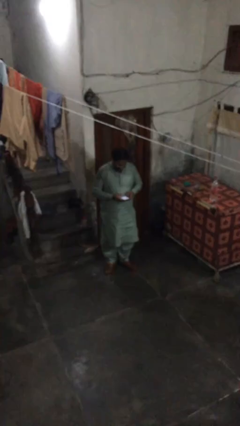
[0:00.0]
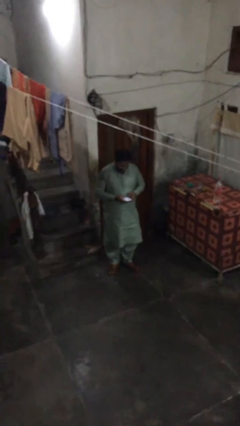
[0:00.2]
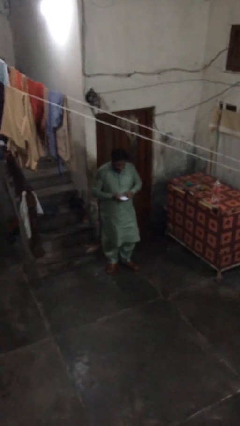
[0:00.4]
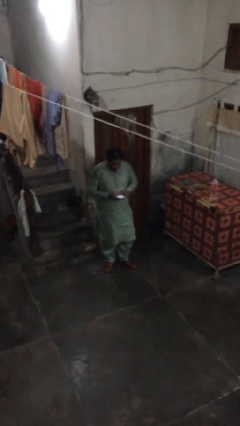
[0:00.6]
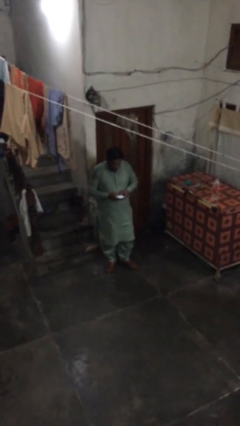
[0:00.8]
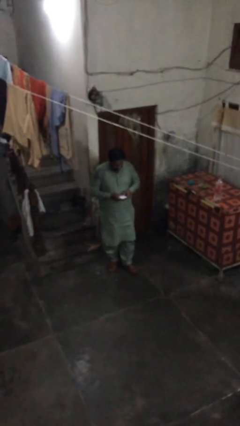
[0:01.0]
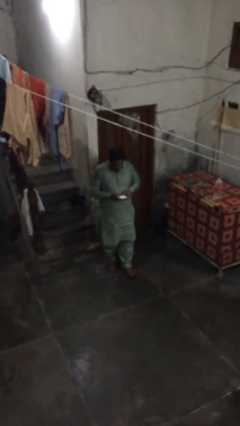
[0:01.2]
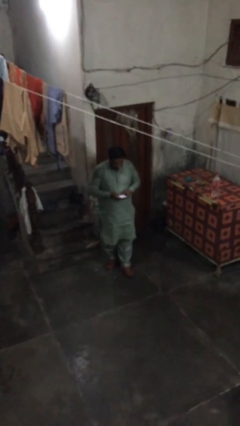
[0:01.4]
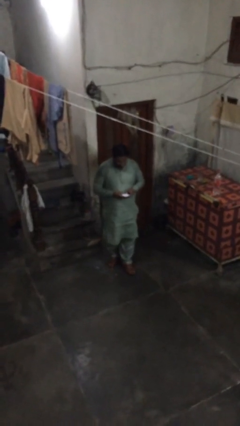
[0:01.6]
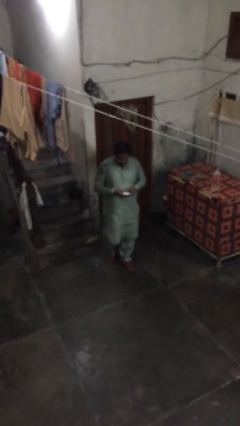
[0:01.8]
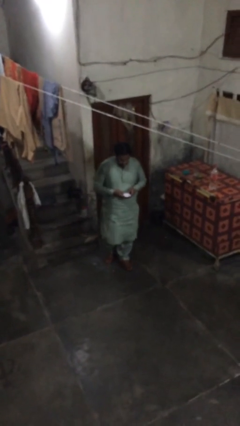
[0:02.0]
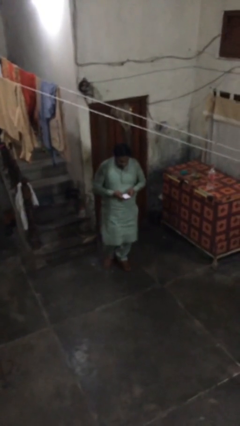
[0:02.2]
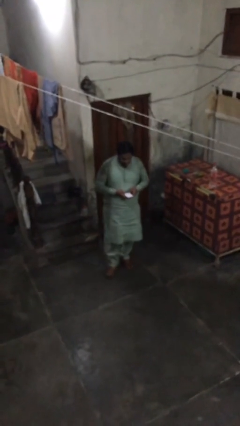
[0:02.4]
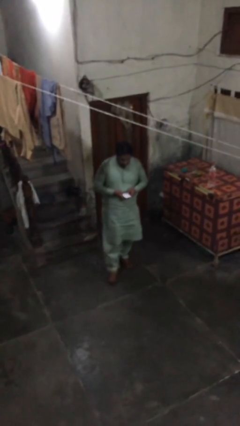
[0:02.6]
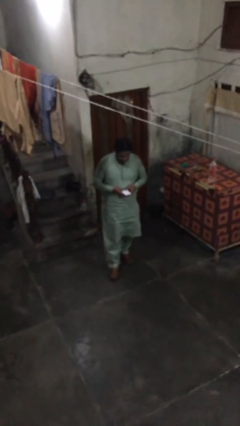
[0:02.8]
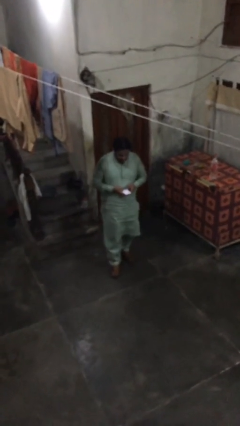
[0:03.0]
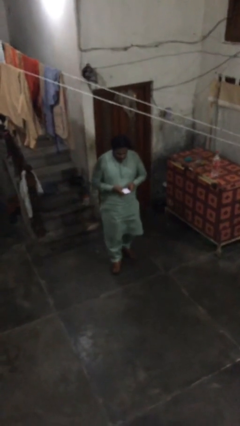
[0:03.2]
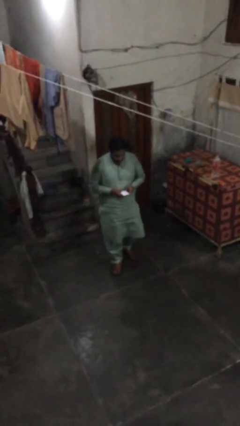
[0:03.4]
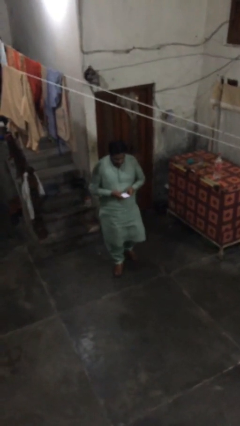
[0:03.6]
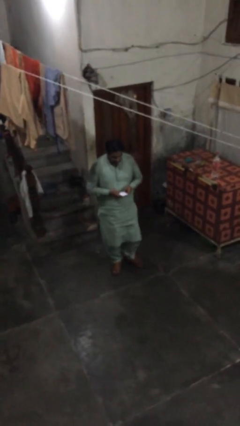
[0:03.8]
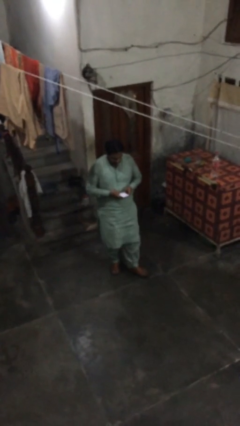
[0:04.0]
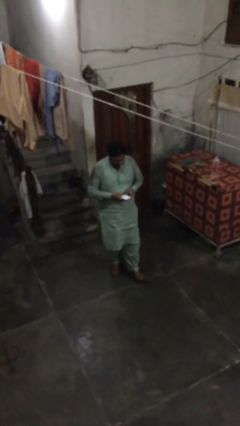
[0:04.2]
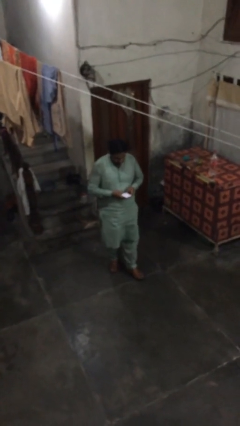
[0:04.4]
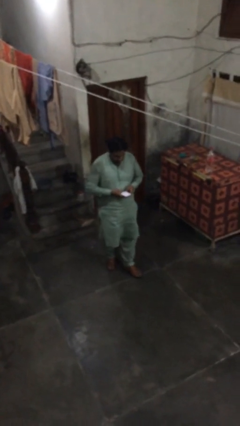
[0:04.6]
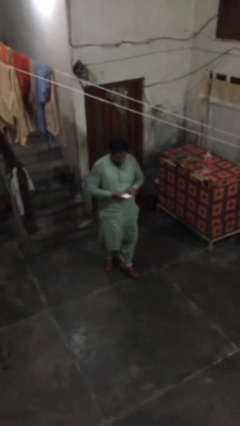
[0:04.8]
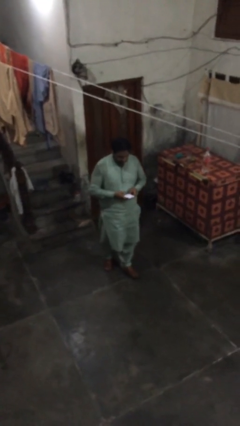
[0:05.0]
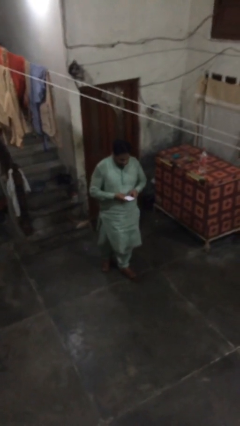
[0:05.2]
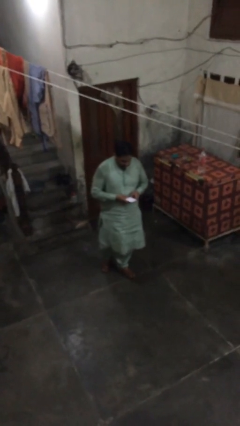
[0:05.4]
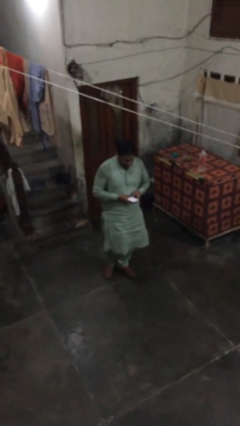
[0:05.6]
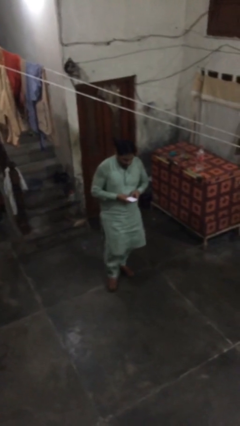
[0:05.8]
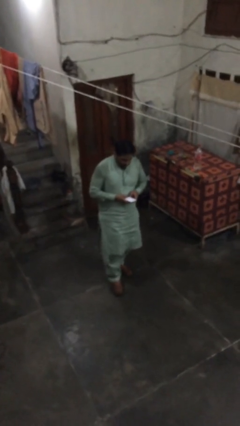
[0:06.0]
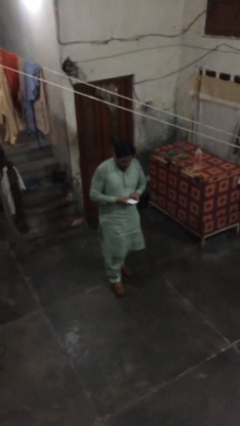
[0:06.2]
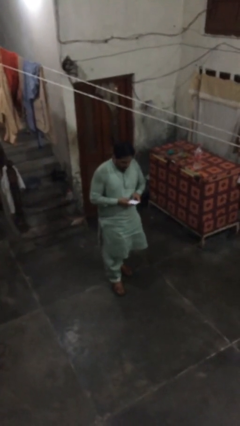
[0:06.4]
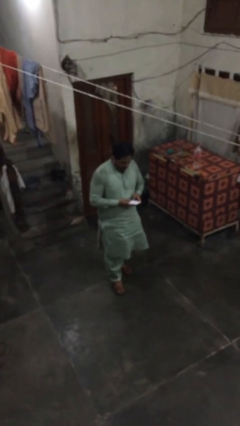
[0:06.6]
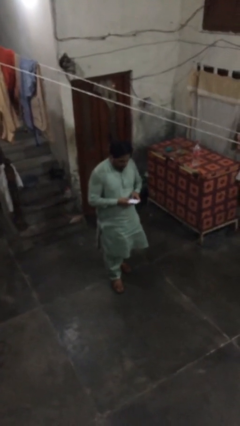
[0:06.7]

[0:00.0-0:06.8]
person texts on phone

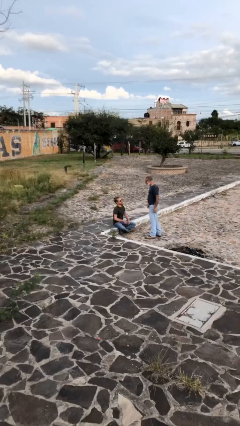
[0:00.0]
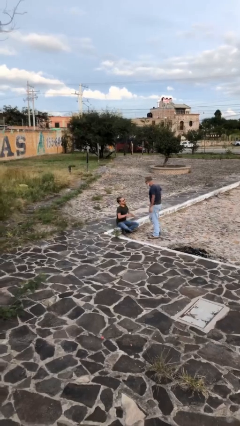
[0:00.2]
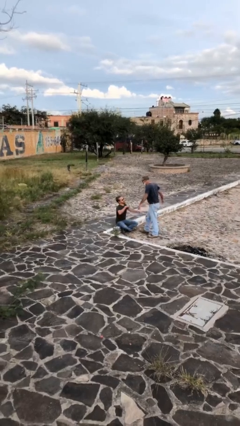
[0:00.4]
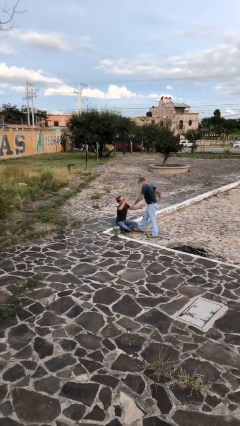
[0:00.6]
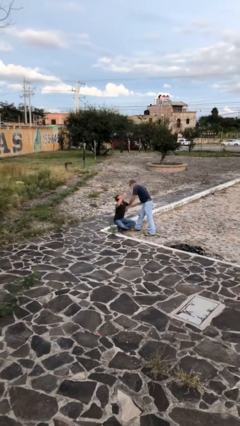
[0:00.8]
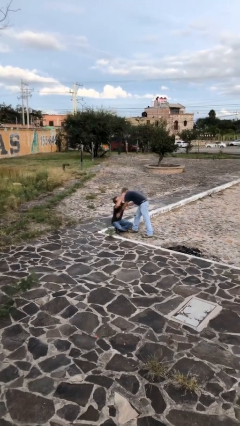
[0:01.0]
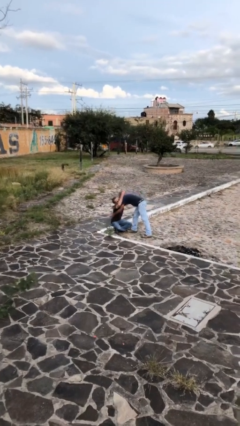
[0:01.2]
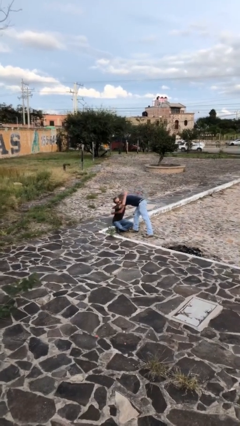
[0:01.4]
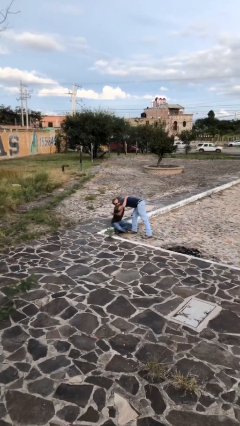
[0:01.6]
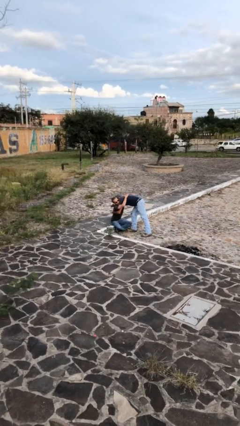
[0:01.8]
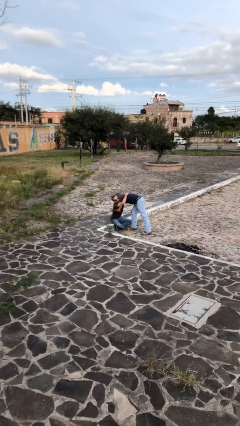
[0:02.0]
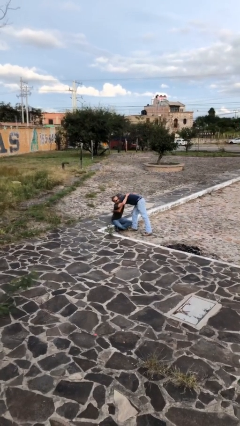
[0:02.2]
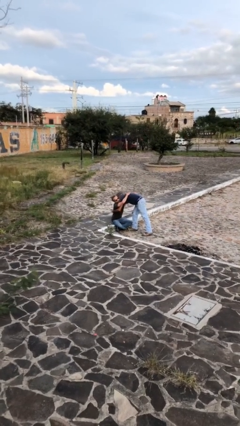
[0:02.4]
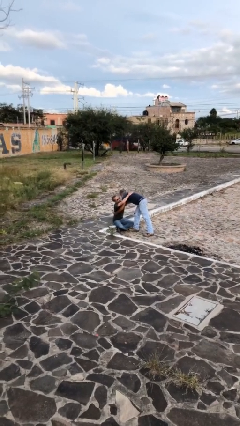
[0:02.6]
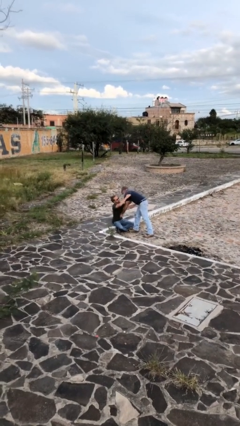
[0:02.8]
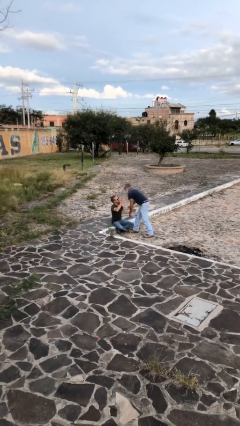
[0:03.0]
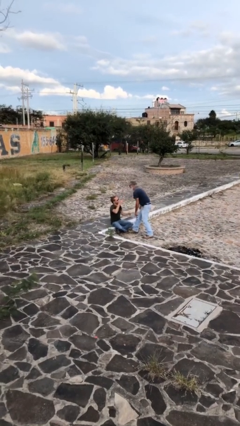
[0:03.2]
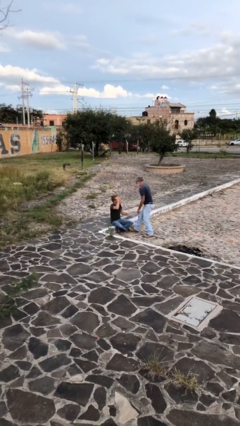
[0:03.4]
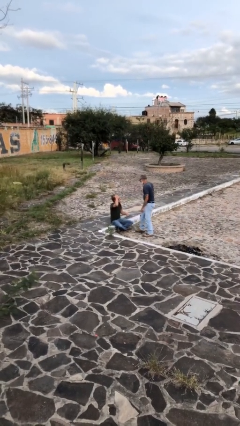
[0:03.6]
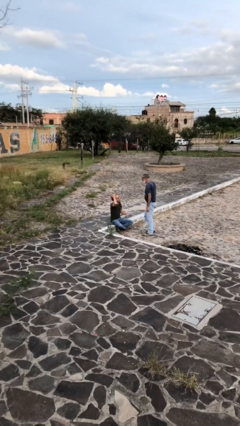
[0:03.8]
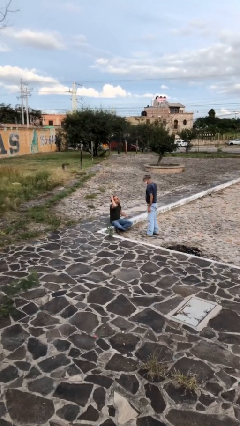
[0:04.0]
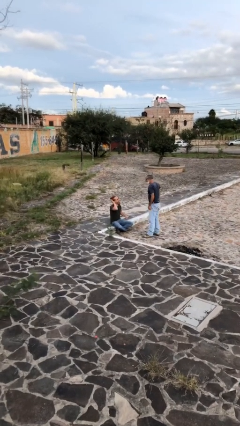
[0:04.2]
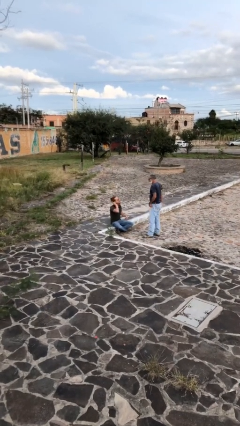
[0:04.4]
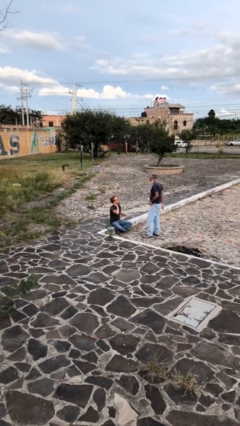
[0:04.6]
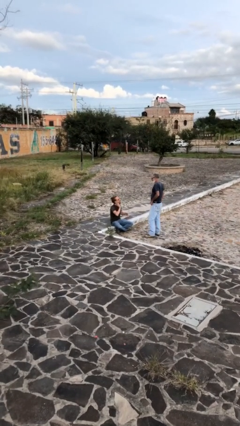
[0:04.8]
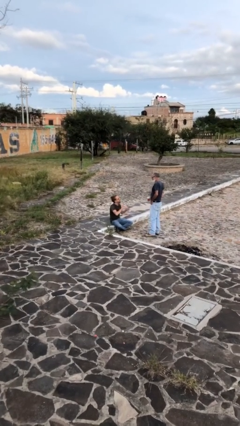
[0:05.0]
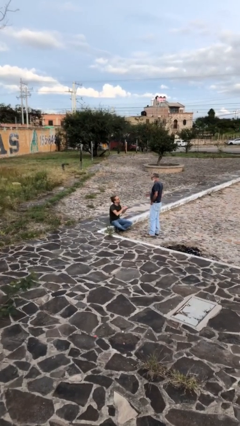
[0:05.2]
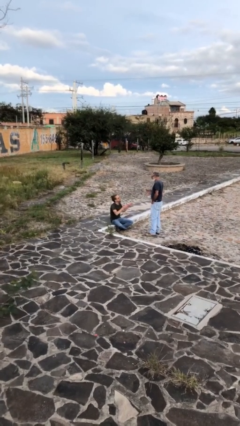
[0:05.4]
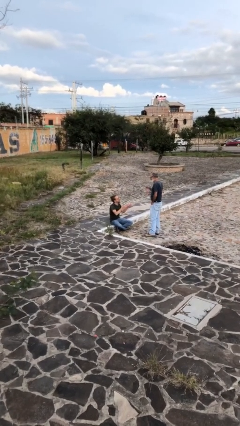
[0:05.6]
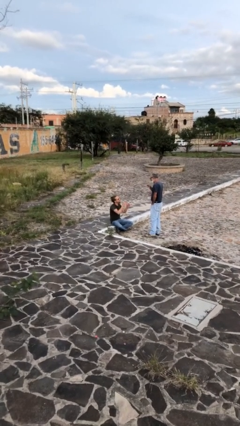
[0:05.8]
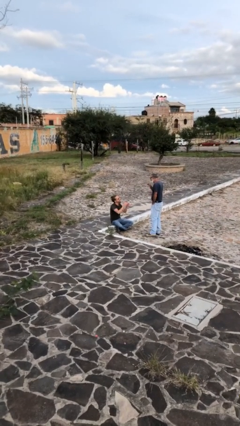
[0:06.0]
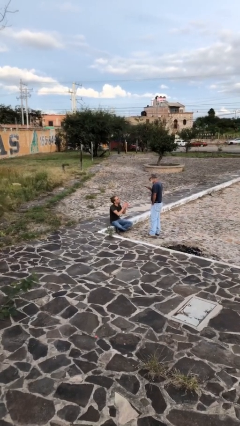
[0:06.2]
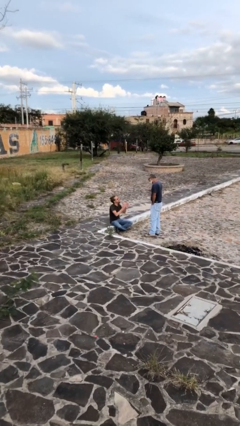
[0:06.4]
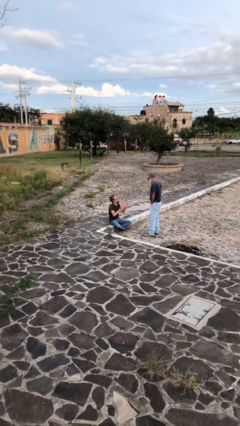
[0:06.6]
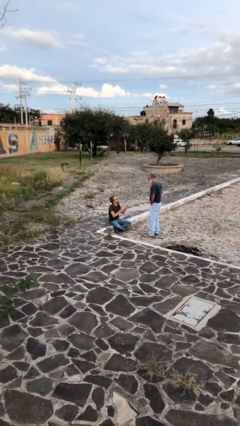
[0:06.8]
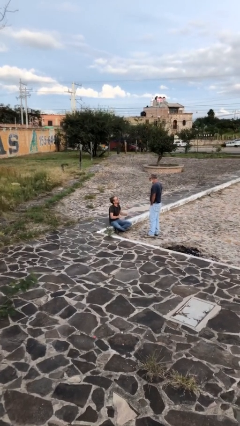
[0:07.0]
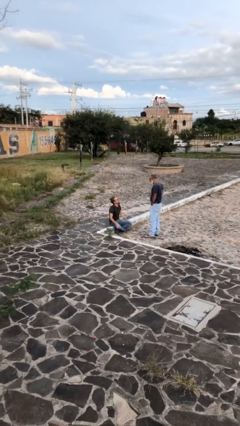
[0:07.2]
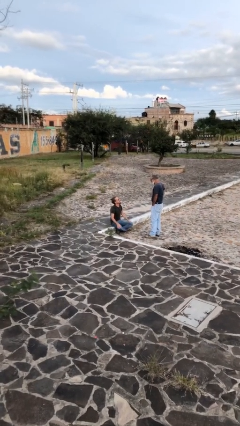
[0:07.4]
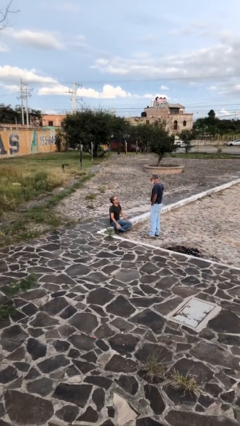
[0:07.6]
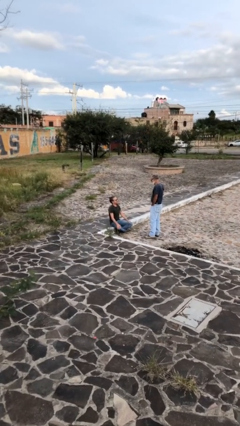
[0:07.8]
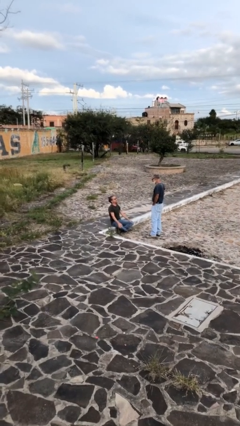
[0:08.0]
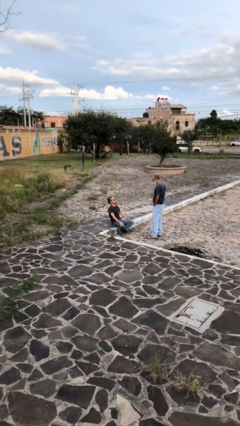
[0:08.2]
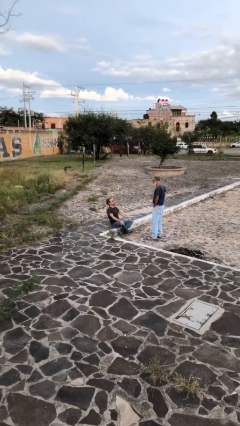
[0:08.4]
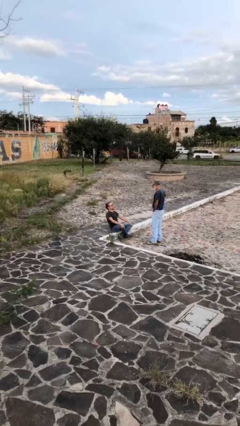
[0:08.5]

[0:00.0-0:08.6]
person embraces person

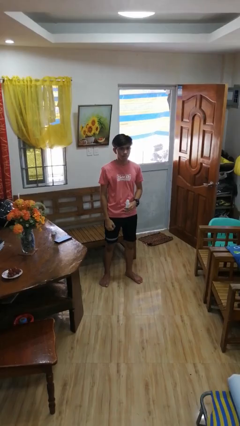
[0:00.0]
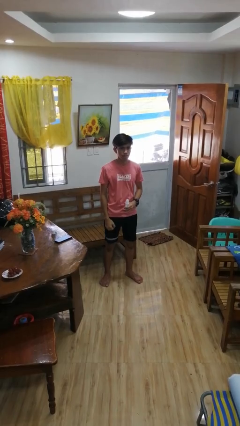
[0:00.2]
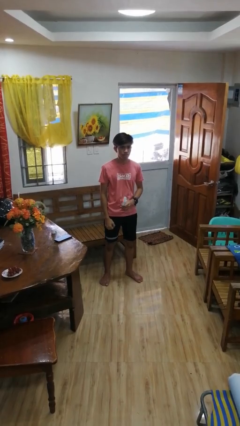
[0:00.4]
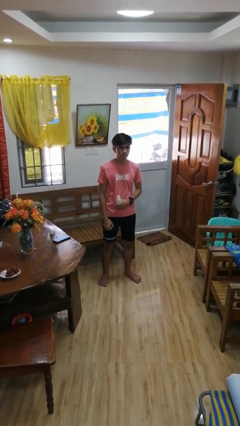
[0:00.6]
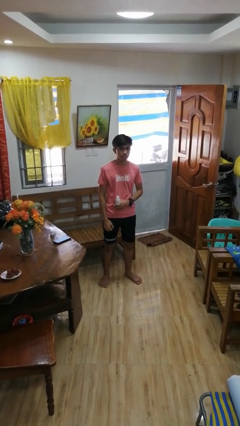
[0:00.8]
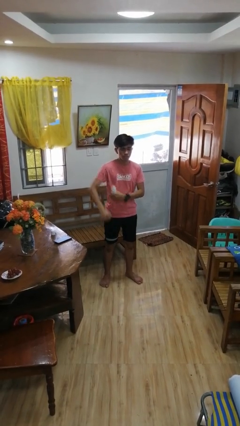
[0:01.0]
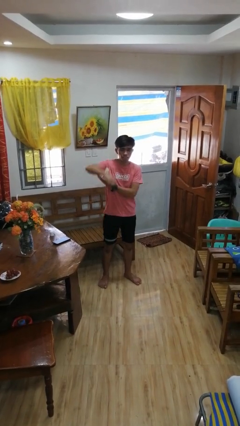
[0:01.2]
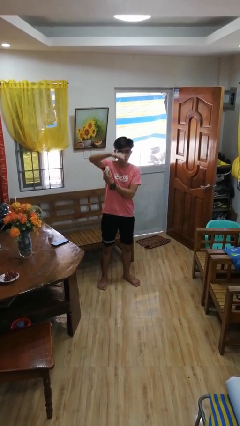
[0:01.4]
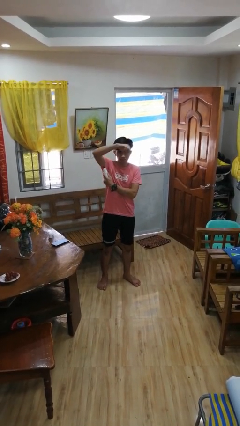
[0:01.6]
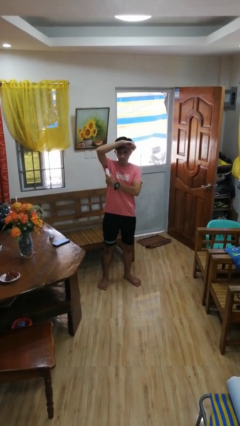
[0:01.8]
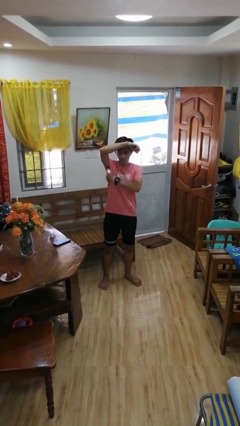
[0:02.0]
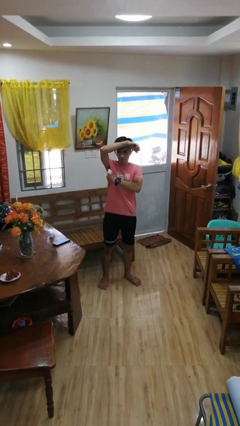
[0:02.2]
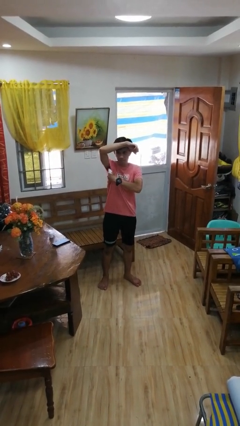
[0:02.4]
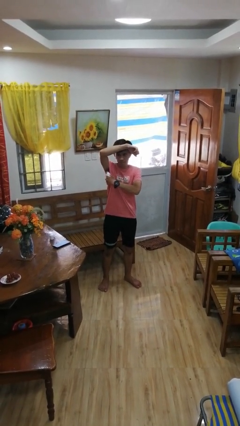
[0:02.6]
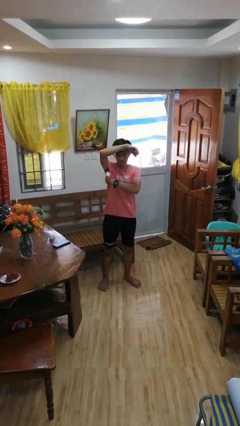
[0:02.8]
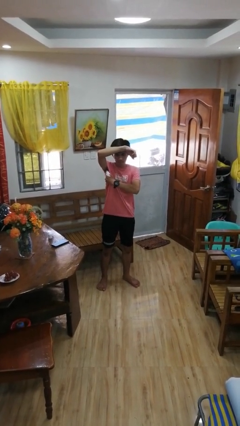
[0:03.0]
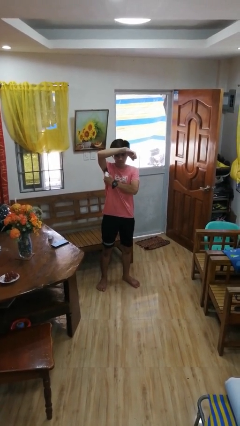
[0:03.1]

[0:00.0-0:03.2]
person applies deodorant
